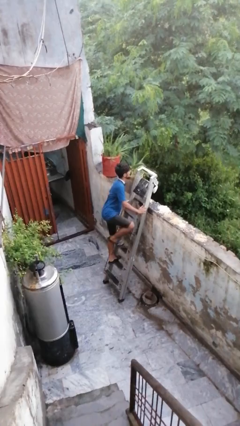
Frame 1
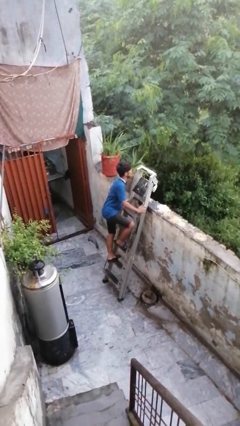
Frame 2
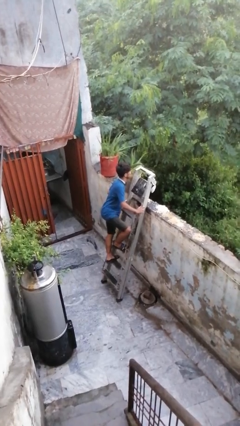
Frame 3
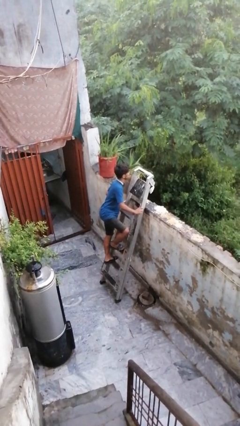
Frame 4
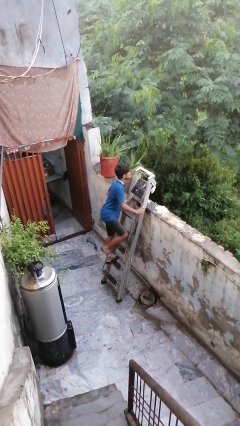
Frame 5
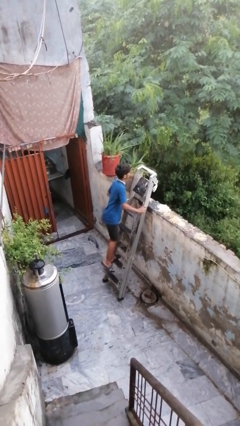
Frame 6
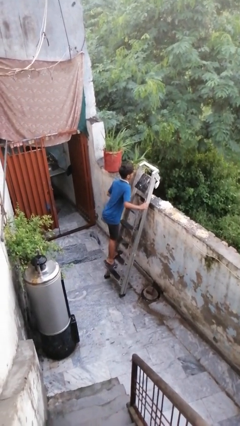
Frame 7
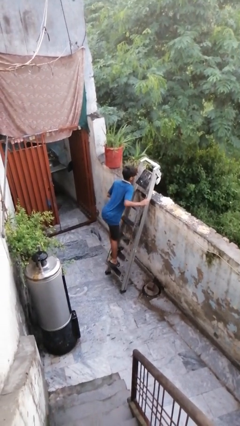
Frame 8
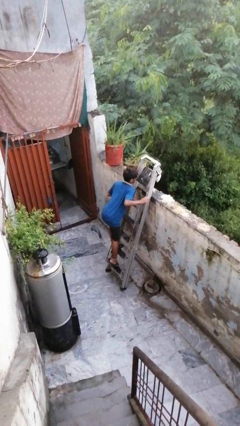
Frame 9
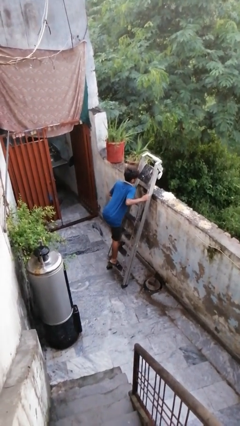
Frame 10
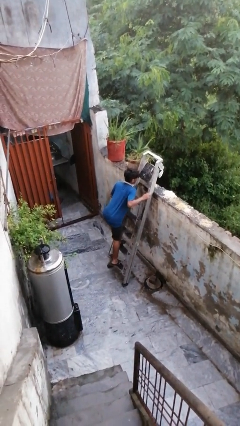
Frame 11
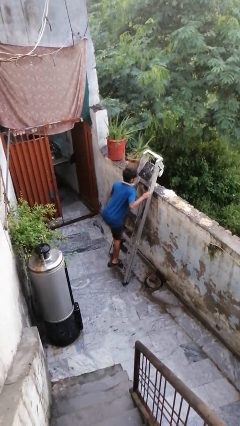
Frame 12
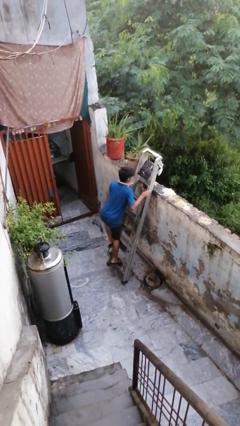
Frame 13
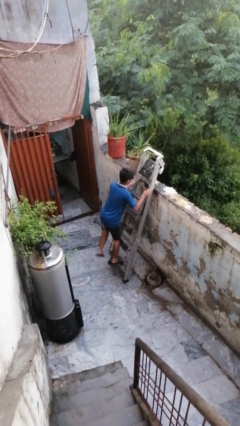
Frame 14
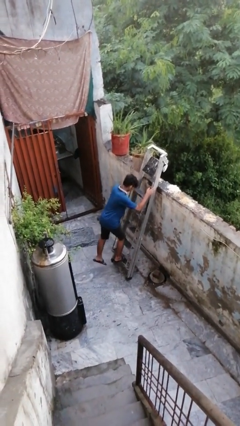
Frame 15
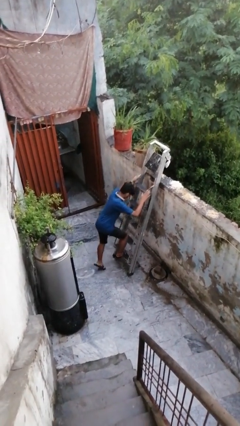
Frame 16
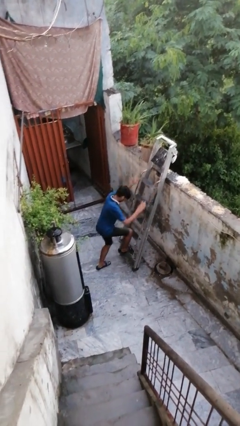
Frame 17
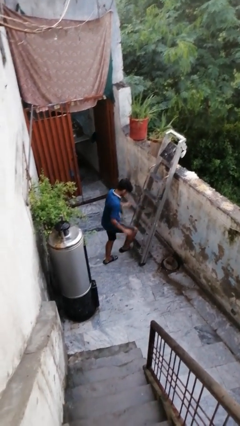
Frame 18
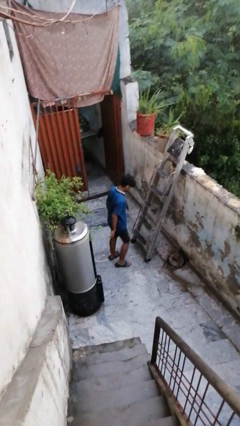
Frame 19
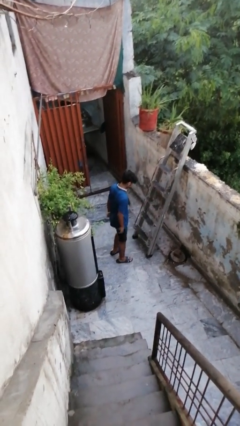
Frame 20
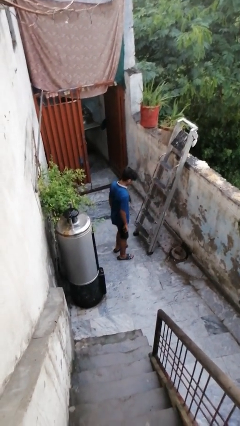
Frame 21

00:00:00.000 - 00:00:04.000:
person climbs down ladder

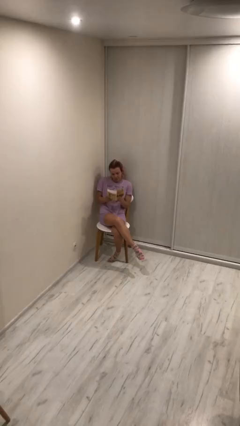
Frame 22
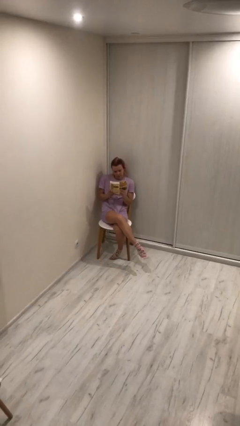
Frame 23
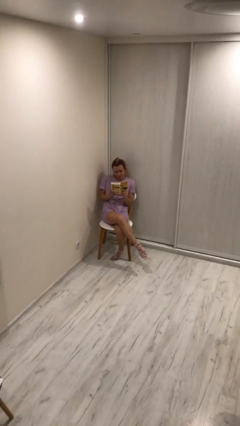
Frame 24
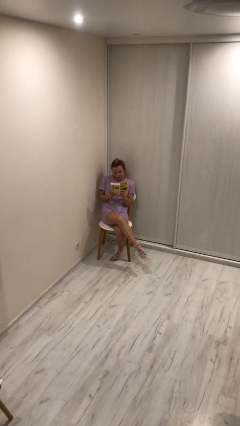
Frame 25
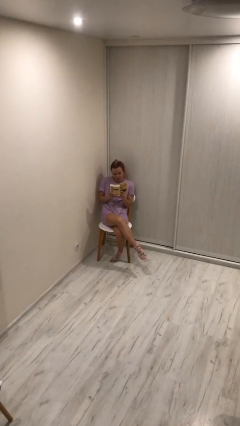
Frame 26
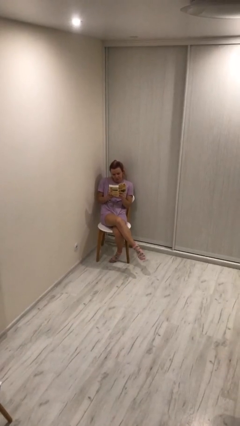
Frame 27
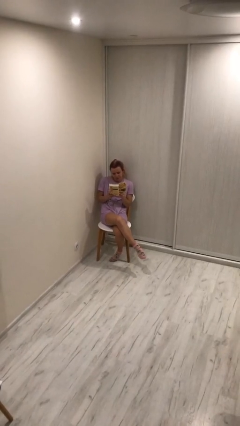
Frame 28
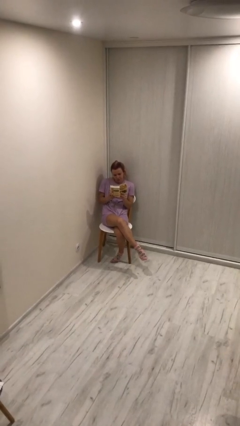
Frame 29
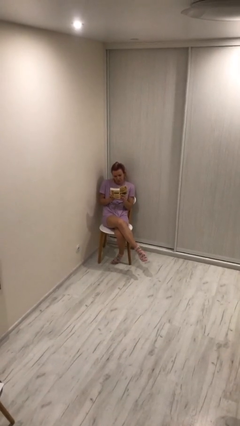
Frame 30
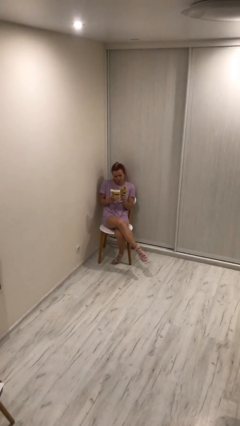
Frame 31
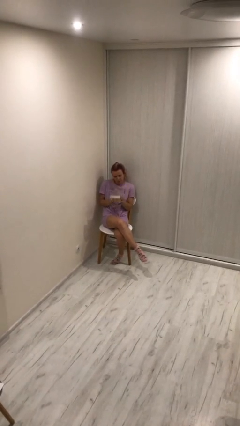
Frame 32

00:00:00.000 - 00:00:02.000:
person reads book

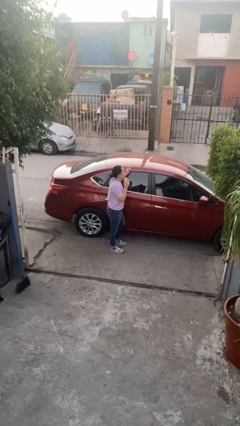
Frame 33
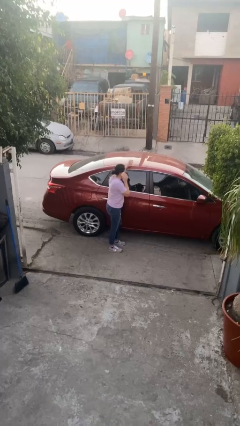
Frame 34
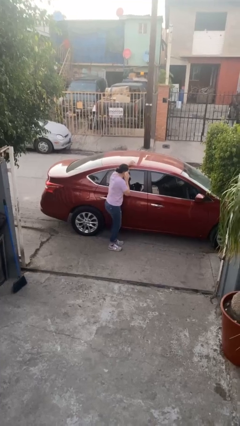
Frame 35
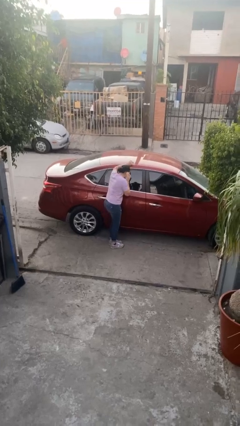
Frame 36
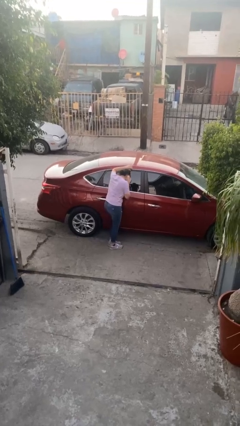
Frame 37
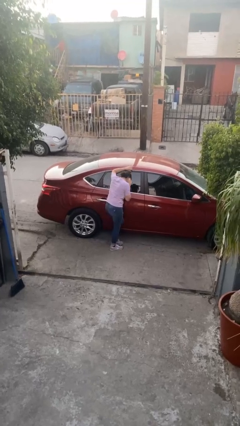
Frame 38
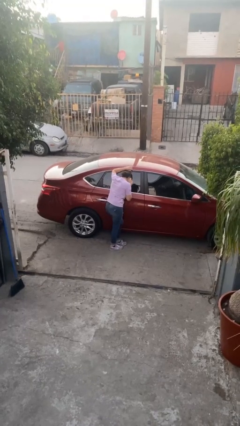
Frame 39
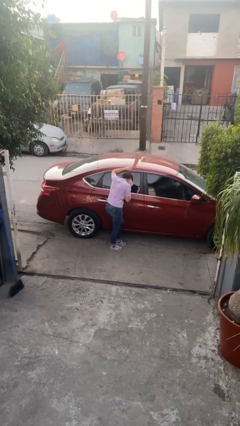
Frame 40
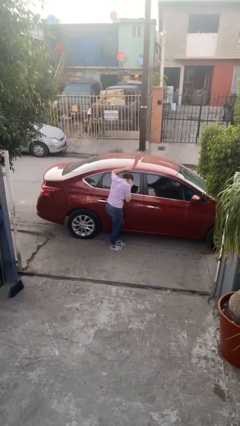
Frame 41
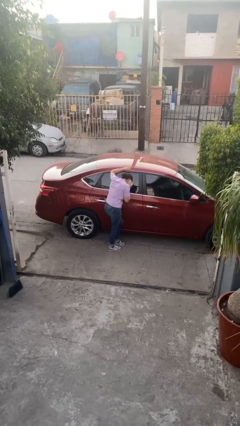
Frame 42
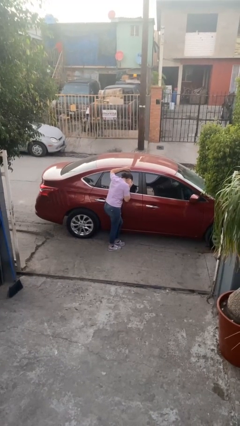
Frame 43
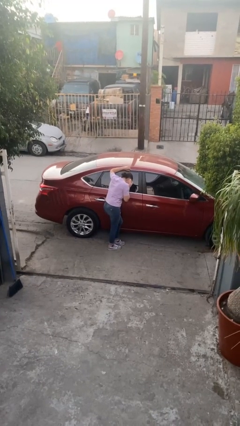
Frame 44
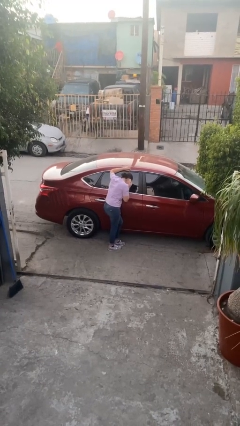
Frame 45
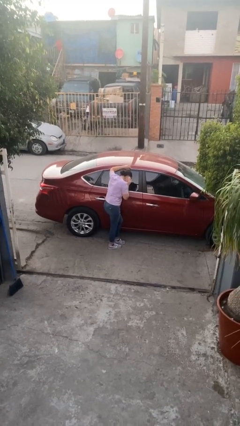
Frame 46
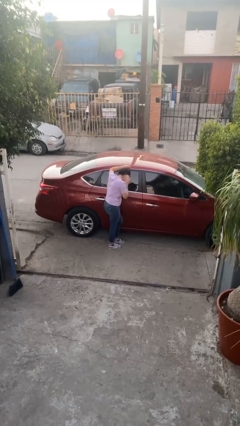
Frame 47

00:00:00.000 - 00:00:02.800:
person leans against car

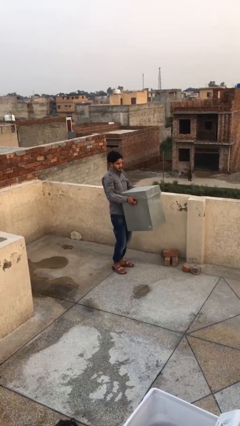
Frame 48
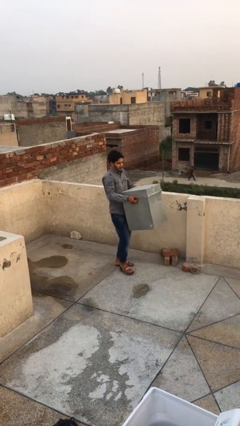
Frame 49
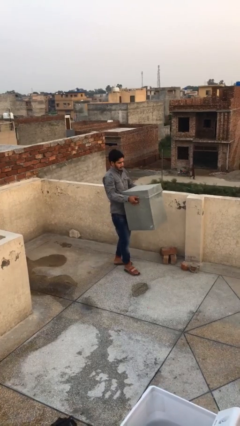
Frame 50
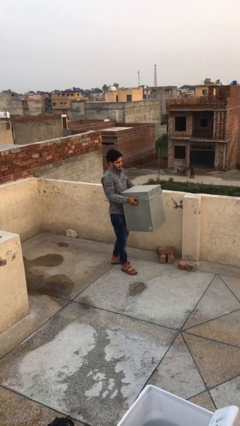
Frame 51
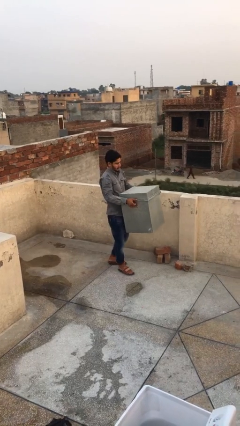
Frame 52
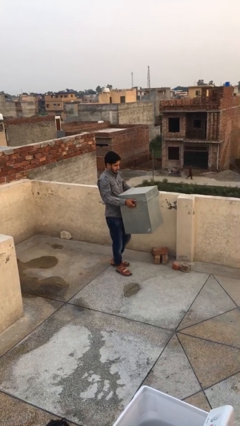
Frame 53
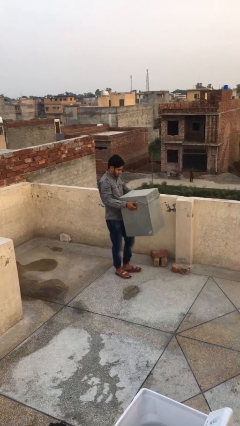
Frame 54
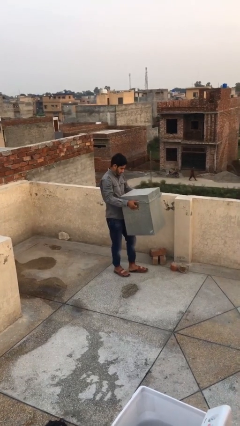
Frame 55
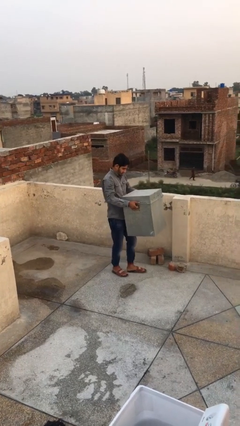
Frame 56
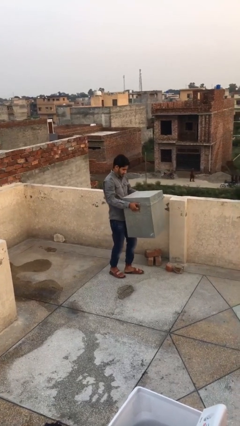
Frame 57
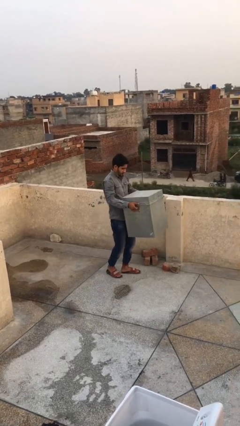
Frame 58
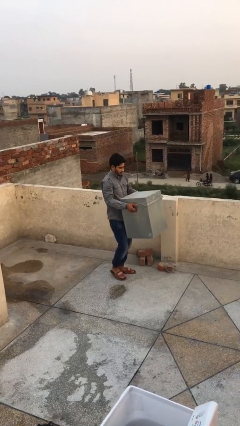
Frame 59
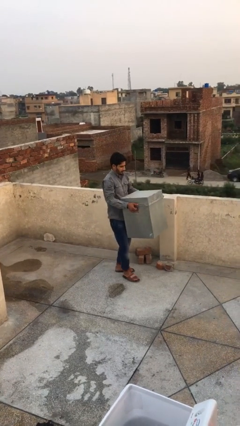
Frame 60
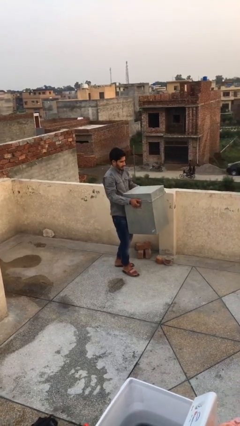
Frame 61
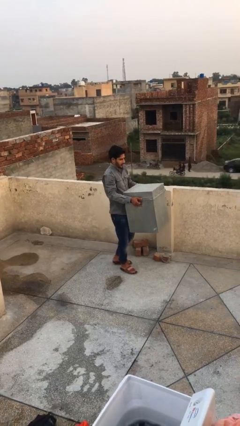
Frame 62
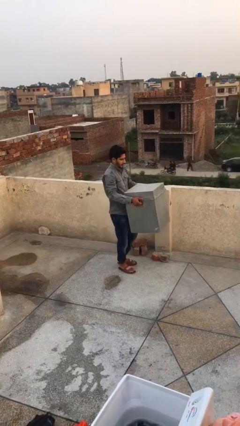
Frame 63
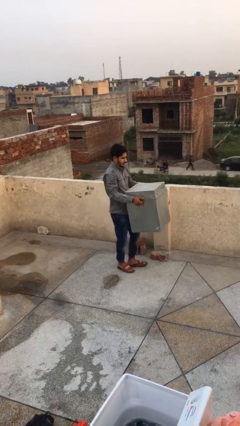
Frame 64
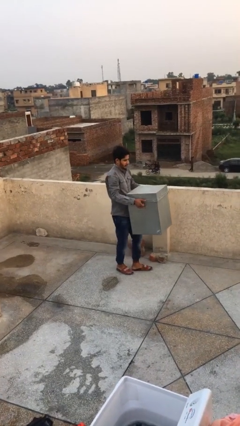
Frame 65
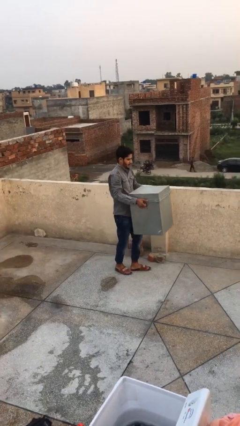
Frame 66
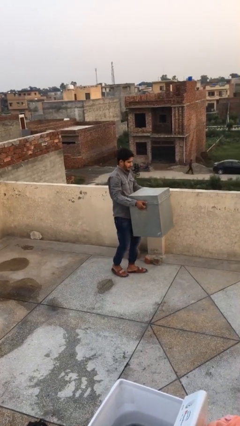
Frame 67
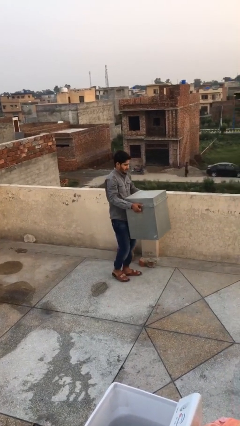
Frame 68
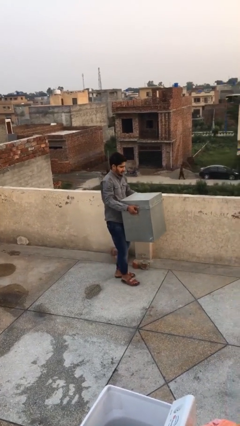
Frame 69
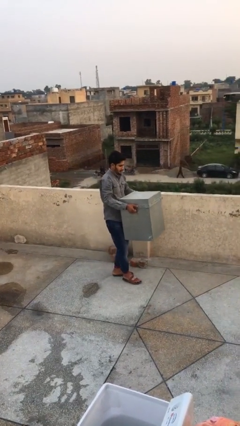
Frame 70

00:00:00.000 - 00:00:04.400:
person carries heavy object

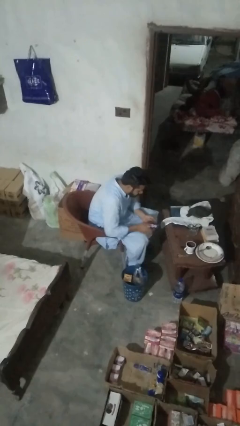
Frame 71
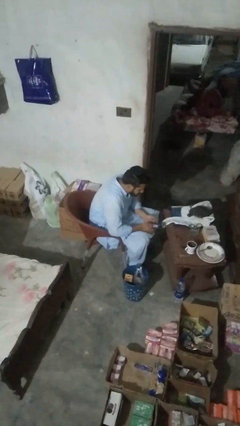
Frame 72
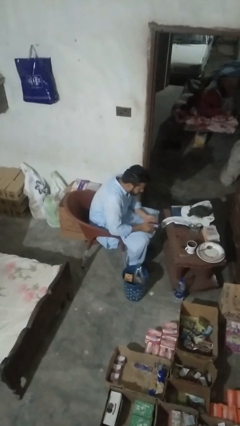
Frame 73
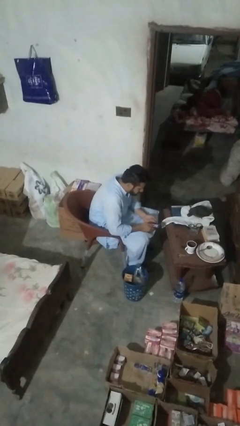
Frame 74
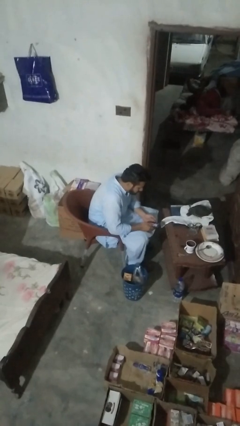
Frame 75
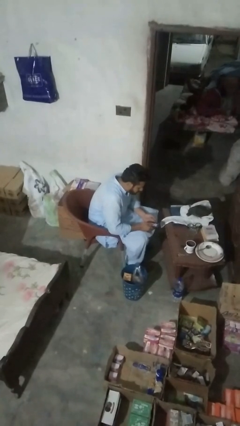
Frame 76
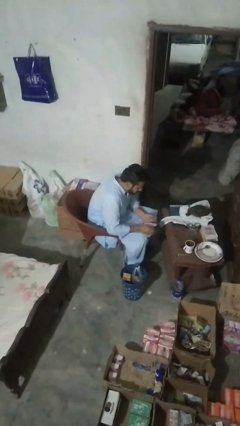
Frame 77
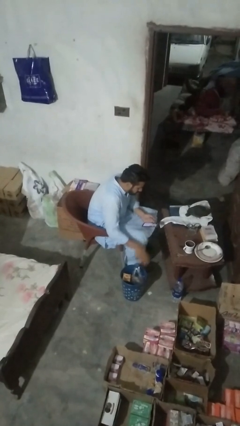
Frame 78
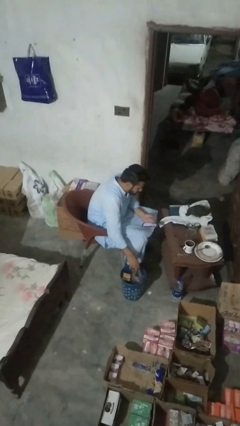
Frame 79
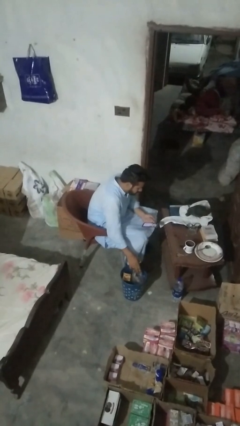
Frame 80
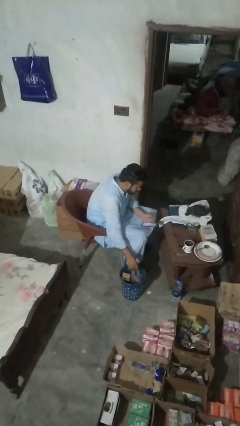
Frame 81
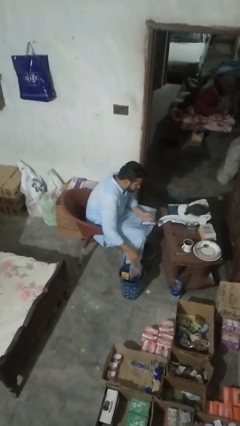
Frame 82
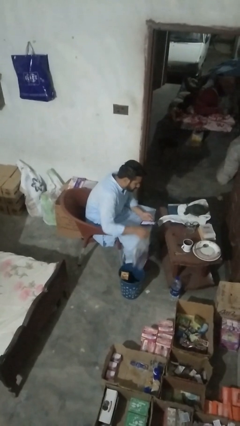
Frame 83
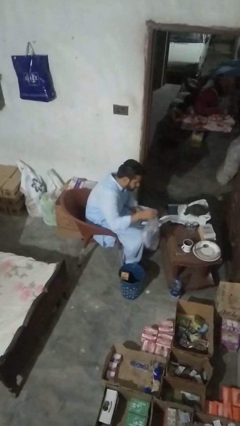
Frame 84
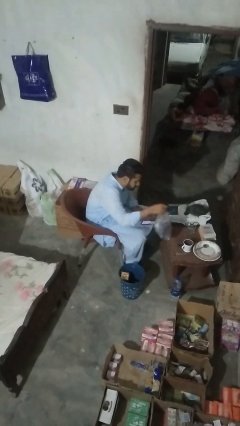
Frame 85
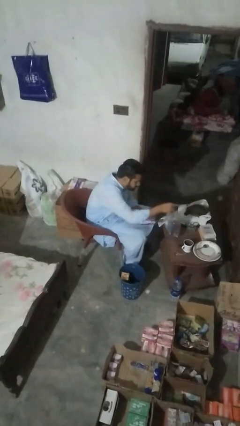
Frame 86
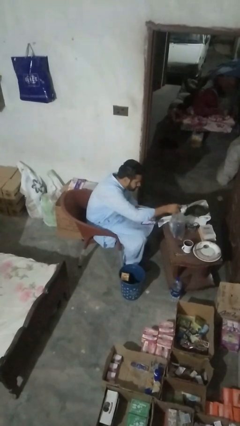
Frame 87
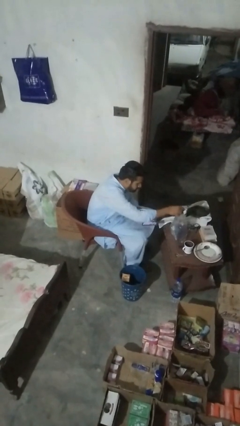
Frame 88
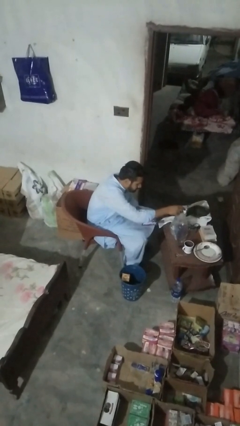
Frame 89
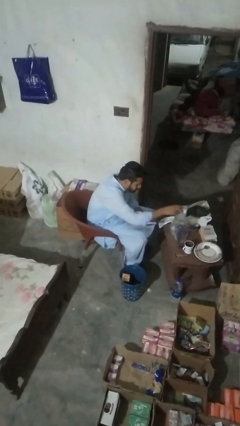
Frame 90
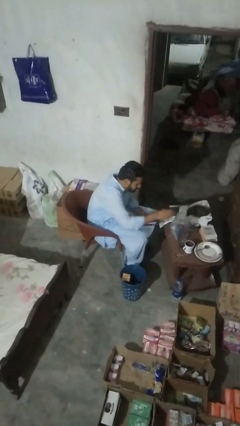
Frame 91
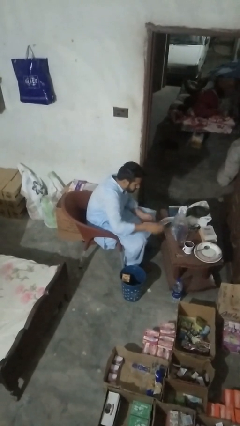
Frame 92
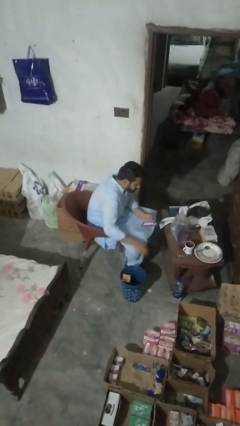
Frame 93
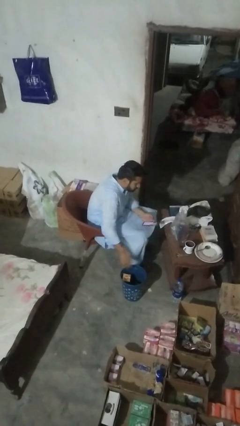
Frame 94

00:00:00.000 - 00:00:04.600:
person inserts trashbag into trashcan
